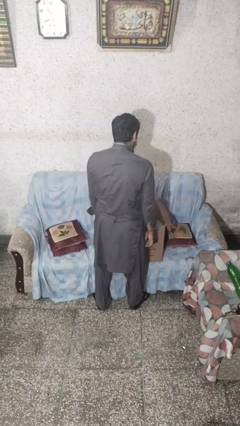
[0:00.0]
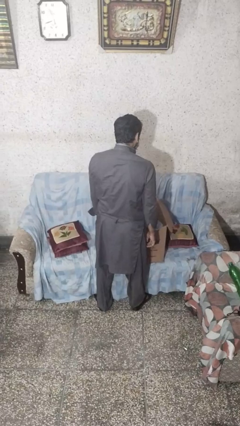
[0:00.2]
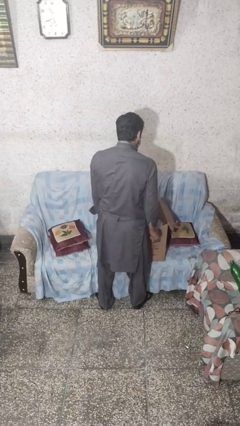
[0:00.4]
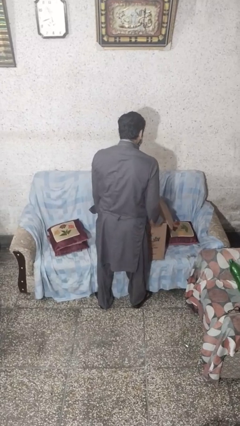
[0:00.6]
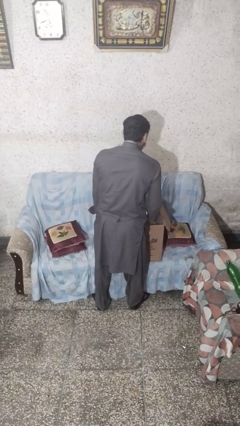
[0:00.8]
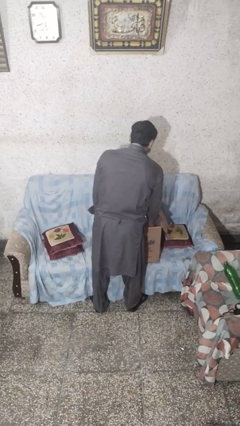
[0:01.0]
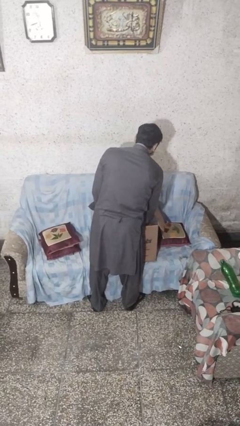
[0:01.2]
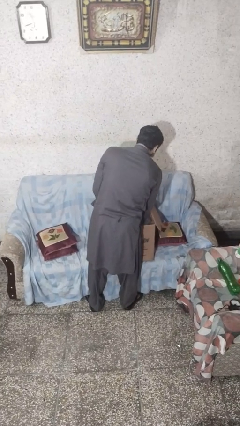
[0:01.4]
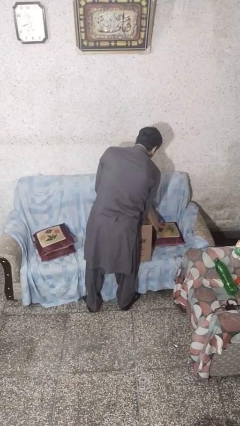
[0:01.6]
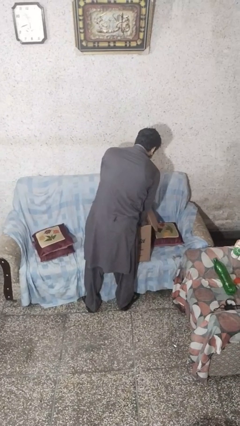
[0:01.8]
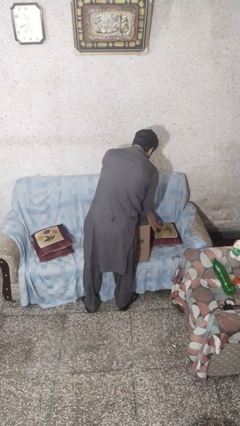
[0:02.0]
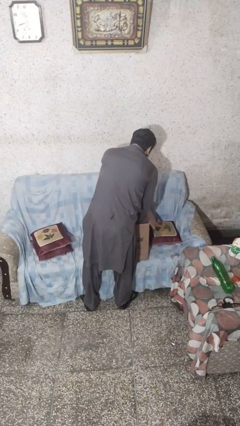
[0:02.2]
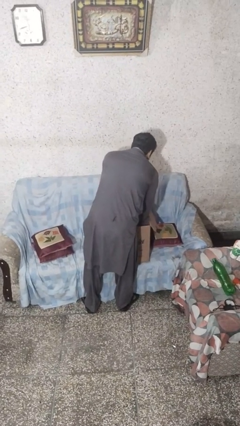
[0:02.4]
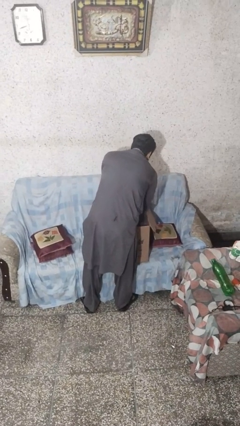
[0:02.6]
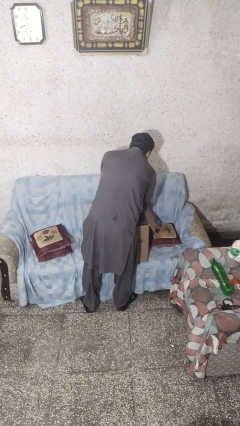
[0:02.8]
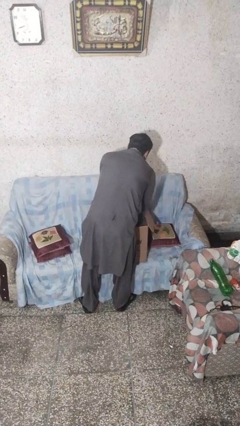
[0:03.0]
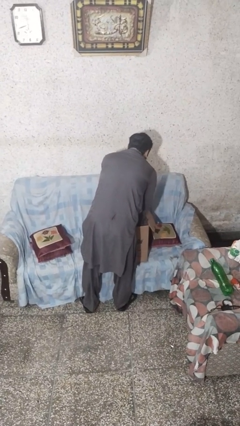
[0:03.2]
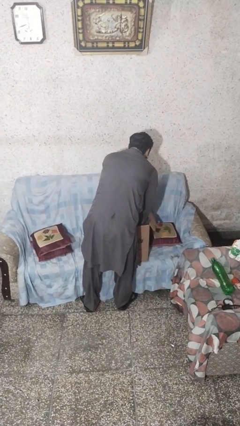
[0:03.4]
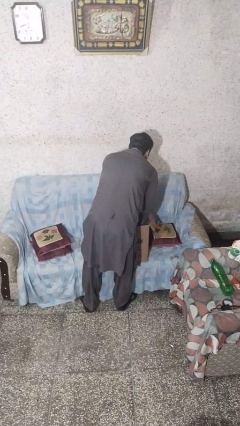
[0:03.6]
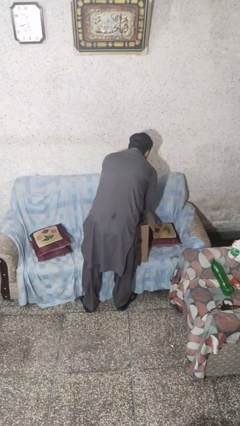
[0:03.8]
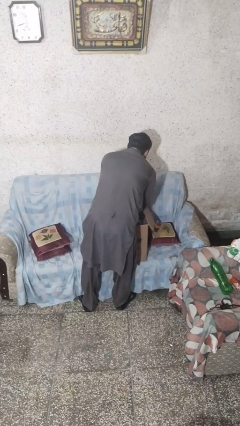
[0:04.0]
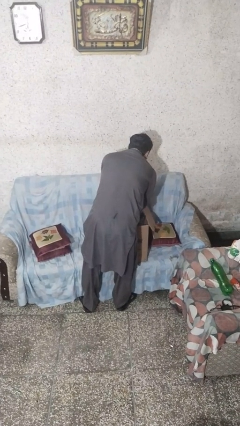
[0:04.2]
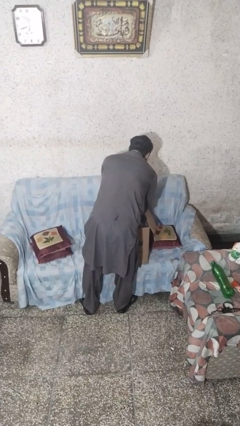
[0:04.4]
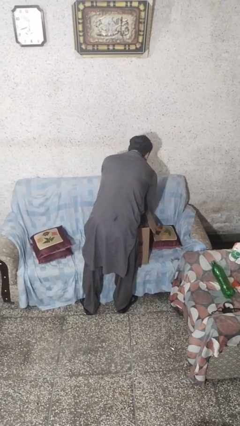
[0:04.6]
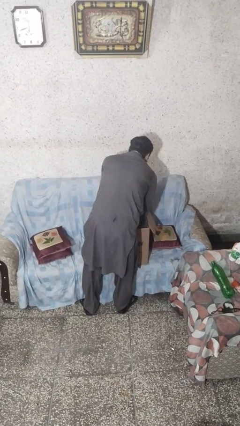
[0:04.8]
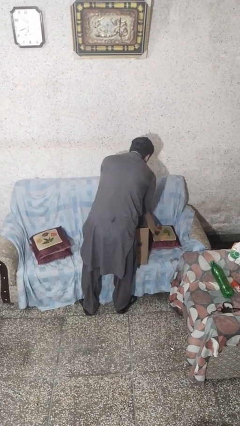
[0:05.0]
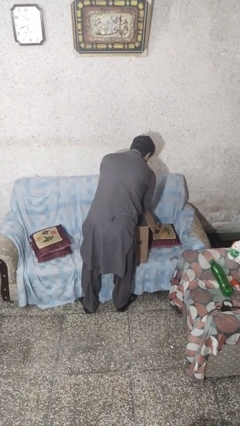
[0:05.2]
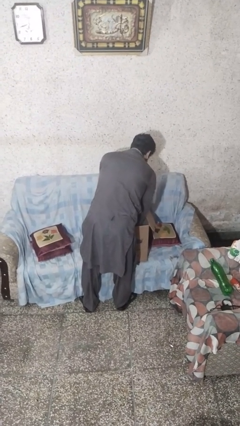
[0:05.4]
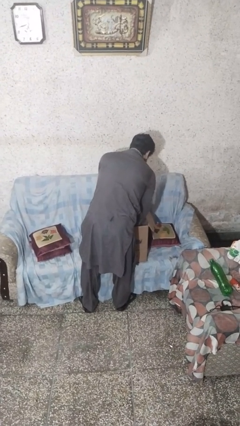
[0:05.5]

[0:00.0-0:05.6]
person searches in box

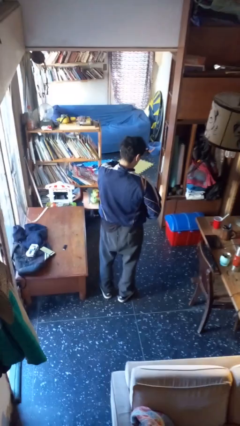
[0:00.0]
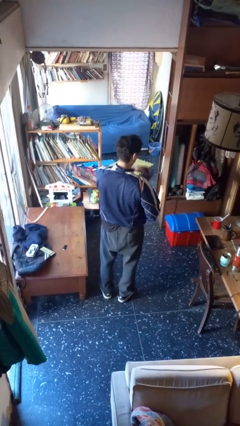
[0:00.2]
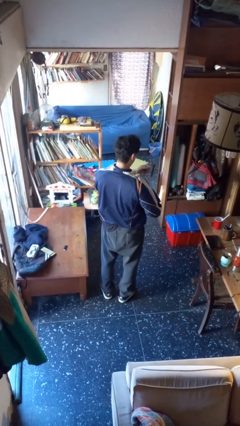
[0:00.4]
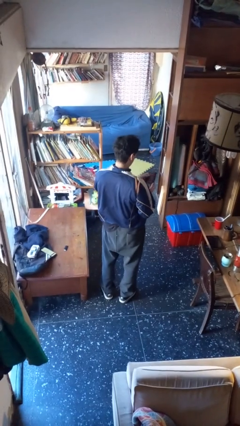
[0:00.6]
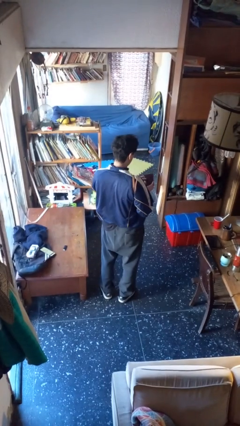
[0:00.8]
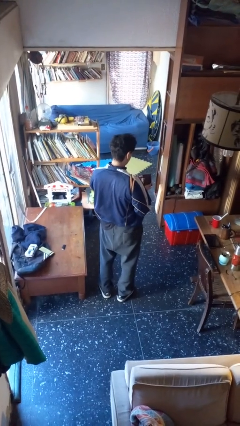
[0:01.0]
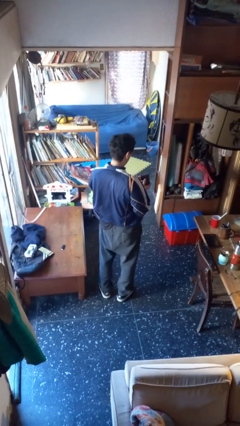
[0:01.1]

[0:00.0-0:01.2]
person takes object from purse

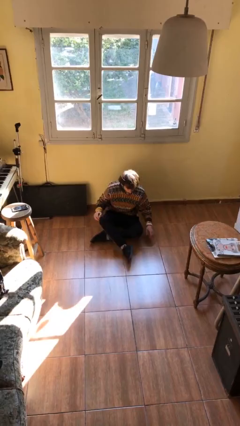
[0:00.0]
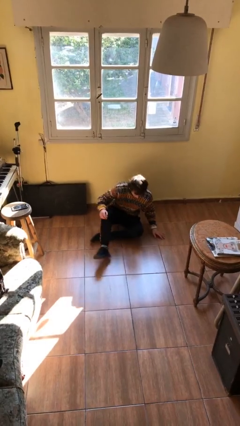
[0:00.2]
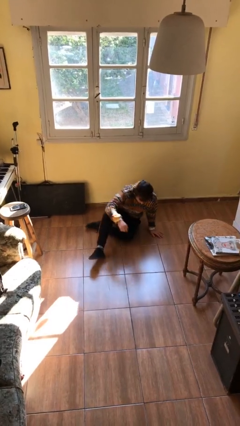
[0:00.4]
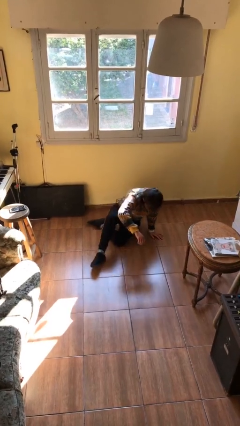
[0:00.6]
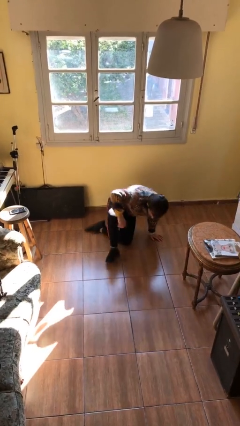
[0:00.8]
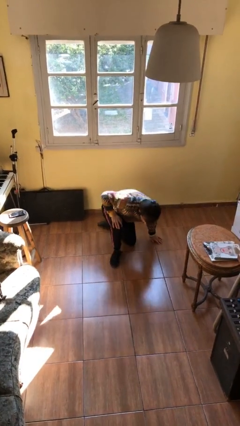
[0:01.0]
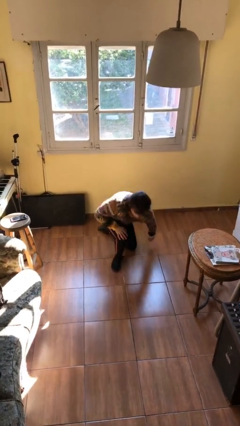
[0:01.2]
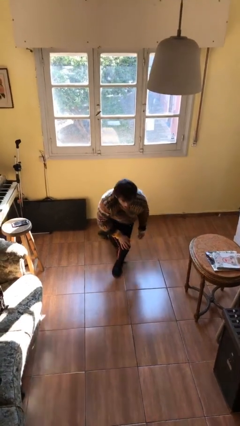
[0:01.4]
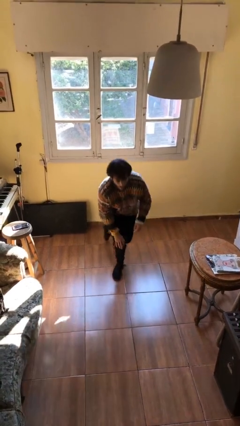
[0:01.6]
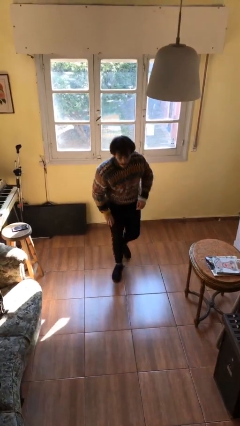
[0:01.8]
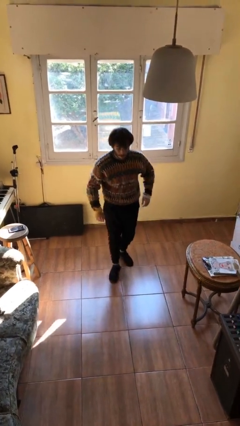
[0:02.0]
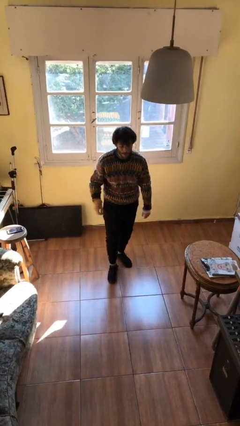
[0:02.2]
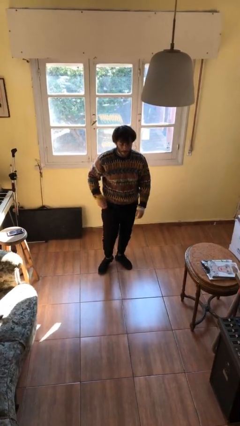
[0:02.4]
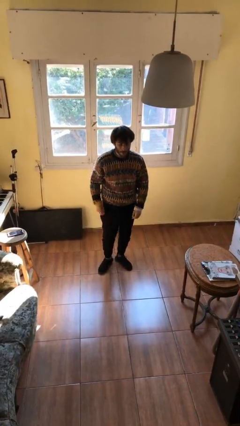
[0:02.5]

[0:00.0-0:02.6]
person stands up from floor

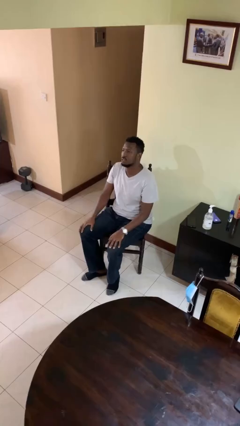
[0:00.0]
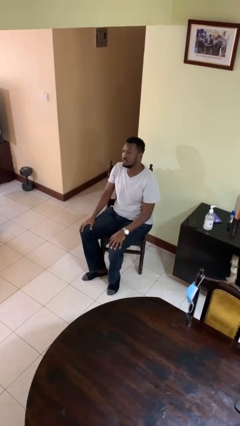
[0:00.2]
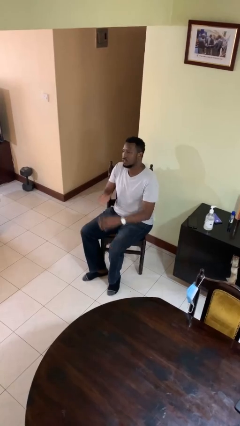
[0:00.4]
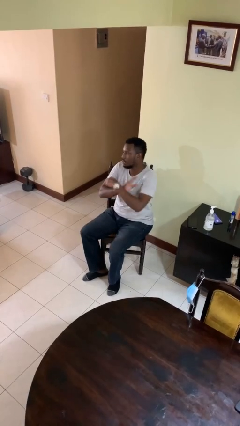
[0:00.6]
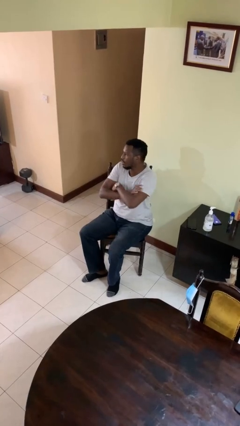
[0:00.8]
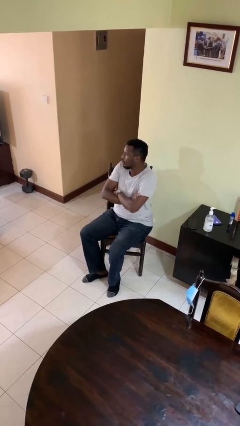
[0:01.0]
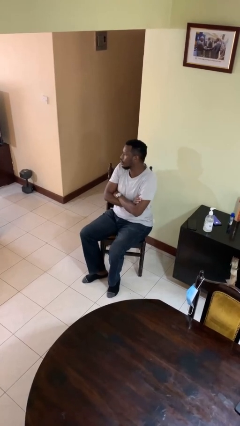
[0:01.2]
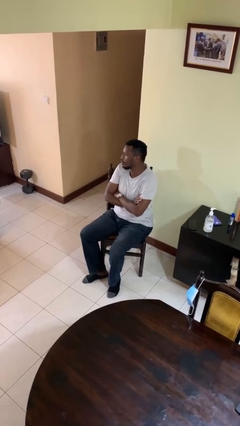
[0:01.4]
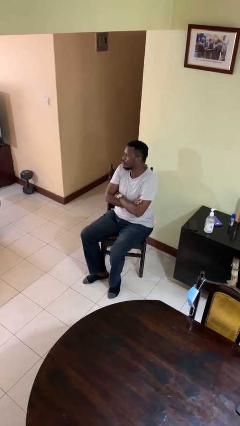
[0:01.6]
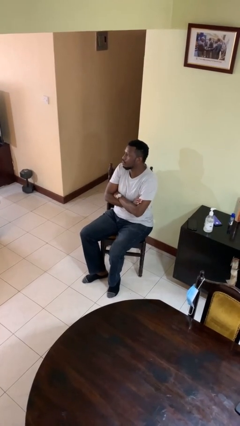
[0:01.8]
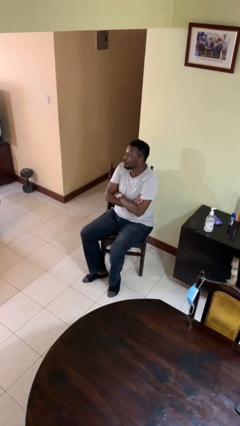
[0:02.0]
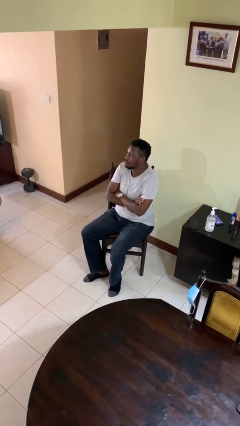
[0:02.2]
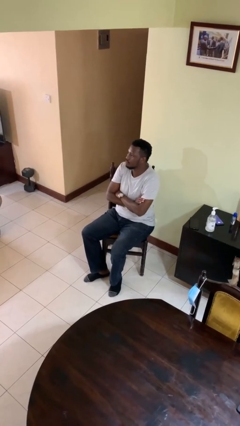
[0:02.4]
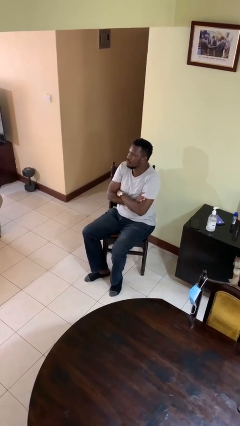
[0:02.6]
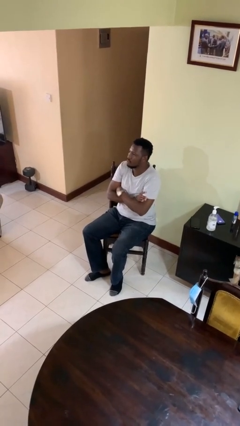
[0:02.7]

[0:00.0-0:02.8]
person crosses arms

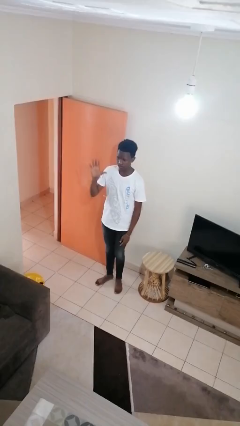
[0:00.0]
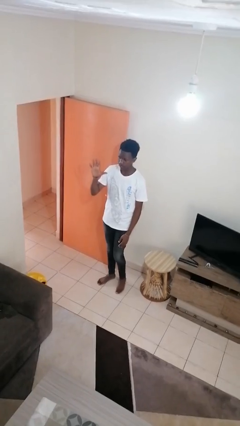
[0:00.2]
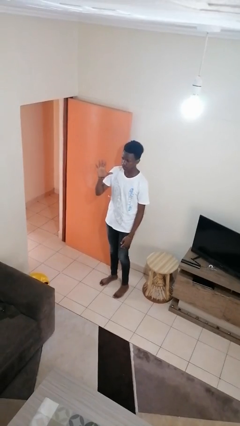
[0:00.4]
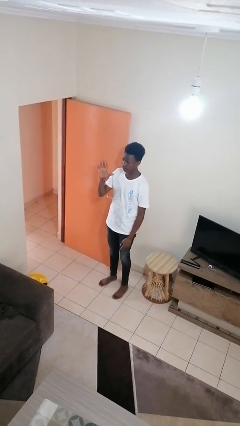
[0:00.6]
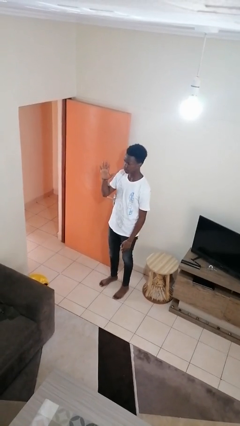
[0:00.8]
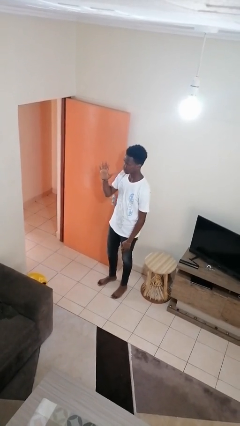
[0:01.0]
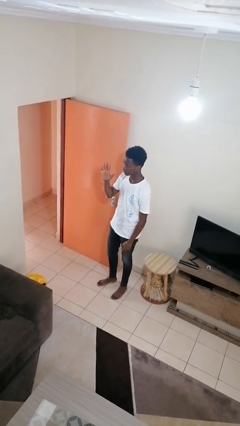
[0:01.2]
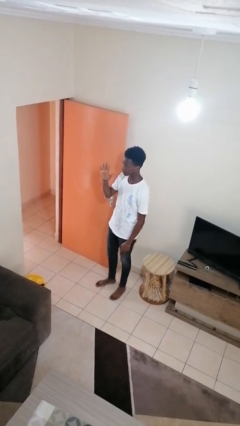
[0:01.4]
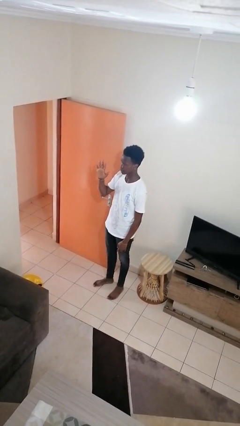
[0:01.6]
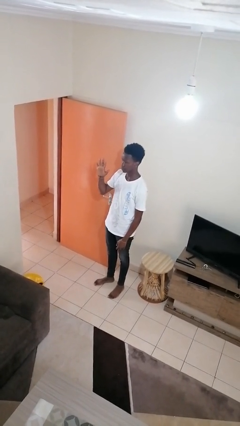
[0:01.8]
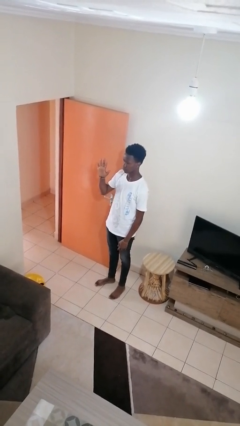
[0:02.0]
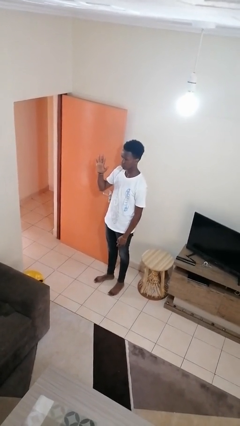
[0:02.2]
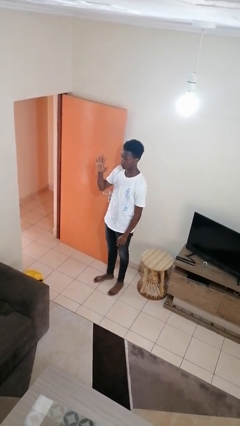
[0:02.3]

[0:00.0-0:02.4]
person gestures number five

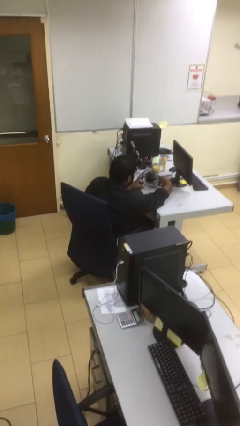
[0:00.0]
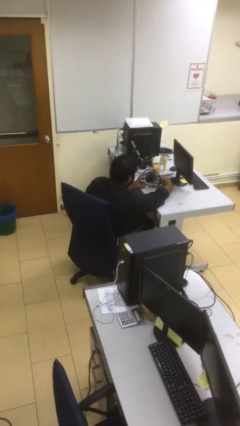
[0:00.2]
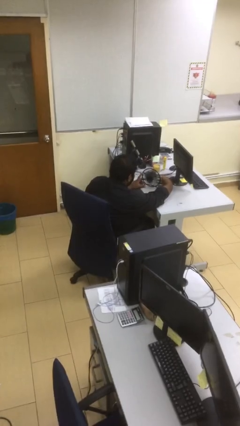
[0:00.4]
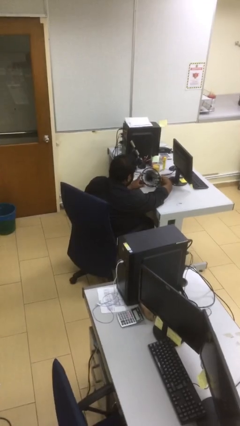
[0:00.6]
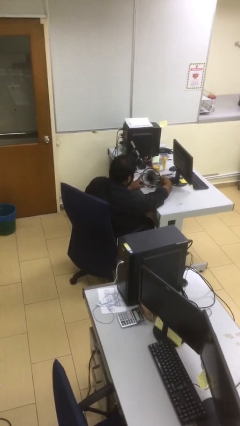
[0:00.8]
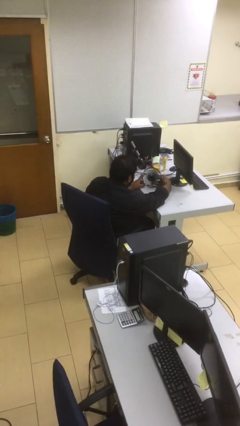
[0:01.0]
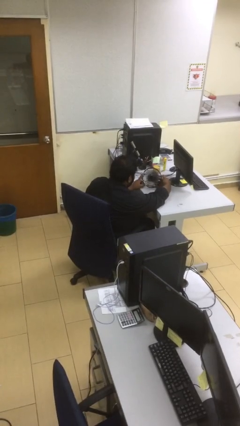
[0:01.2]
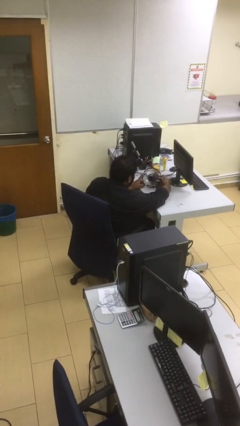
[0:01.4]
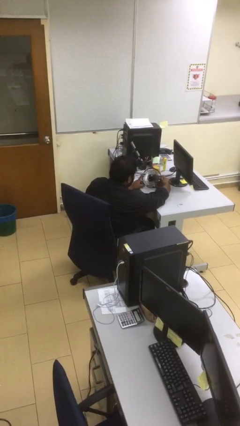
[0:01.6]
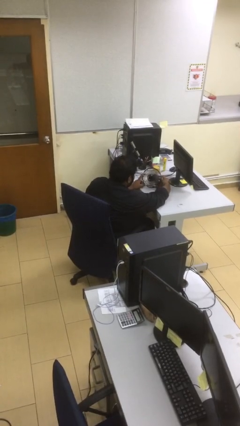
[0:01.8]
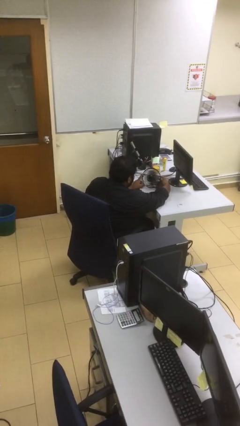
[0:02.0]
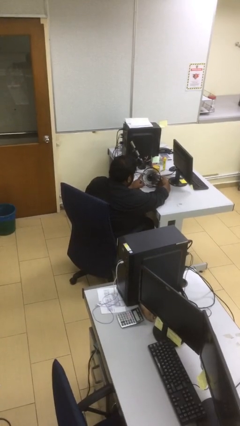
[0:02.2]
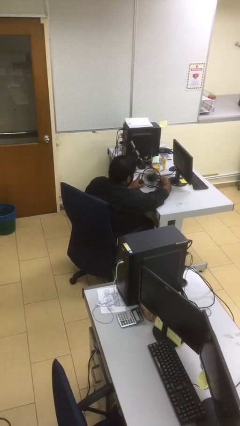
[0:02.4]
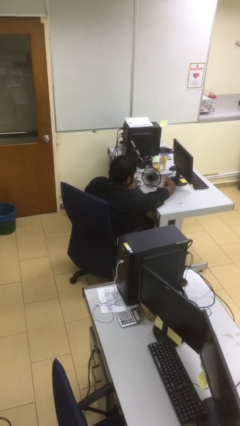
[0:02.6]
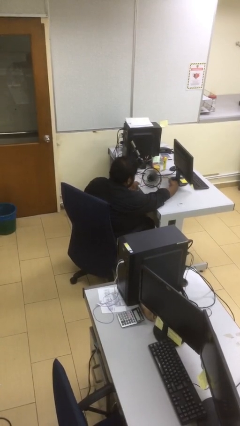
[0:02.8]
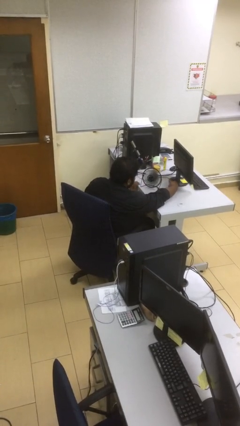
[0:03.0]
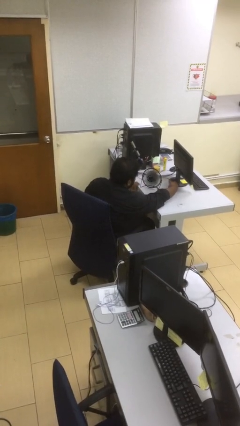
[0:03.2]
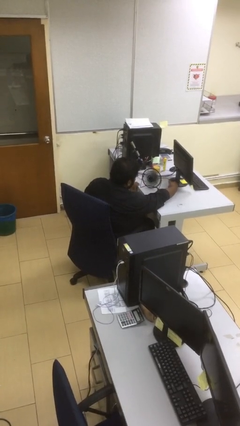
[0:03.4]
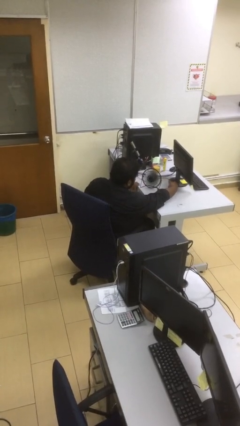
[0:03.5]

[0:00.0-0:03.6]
person turns on fan
